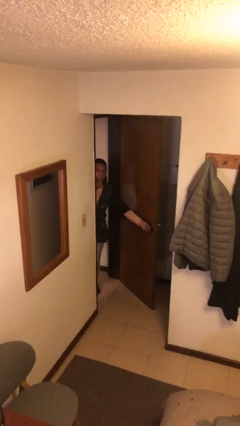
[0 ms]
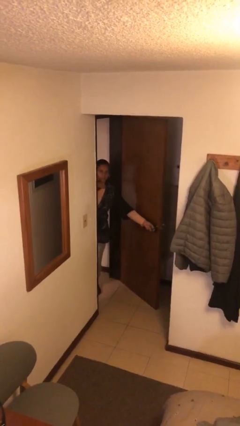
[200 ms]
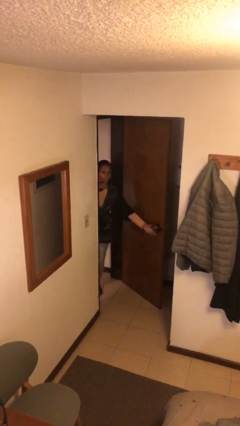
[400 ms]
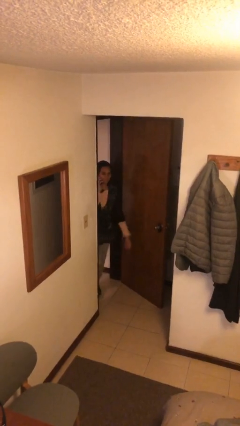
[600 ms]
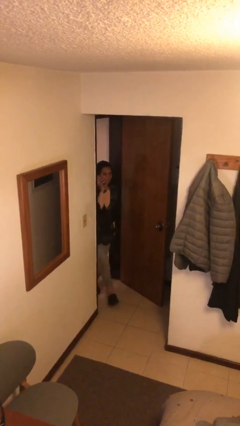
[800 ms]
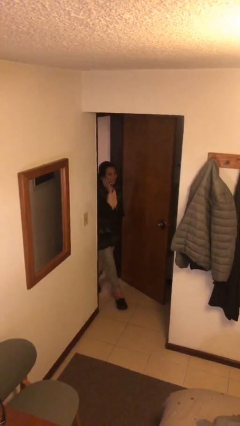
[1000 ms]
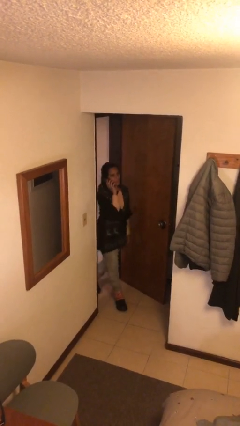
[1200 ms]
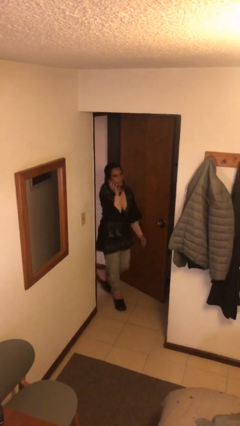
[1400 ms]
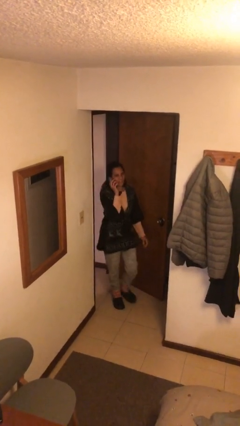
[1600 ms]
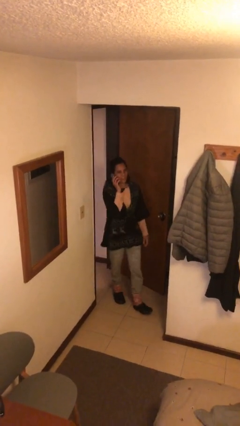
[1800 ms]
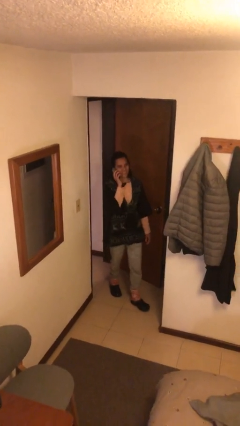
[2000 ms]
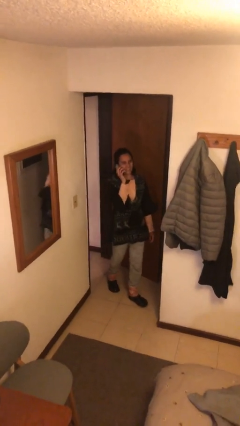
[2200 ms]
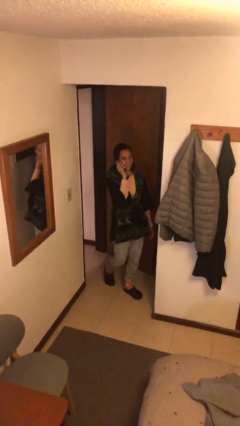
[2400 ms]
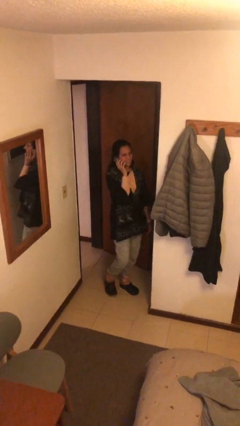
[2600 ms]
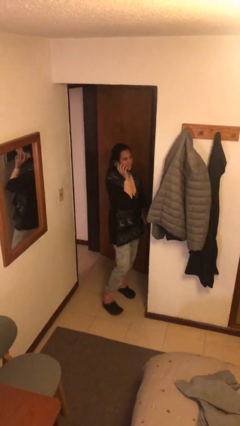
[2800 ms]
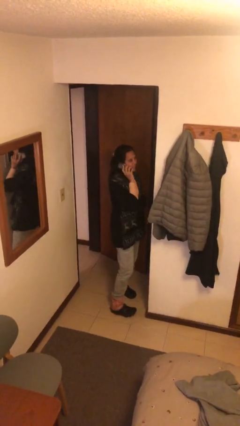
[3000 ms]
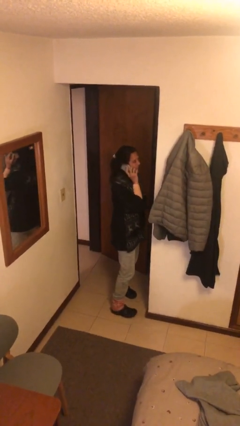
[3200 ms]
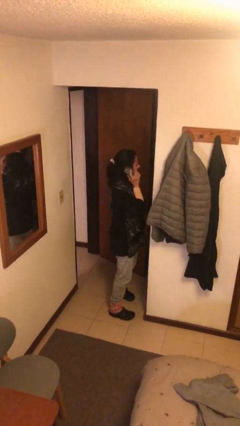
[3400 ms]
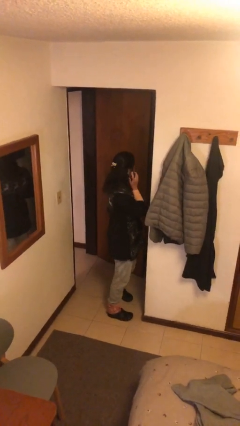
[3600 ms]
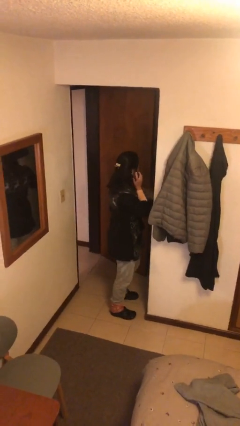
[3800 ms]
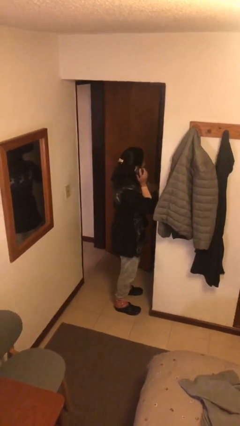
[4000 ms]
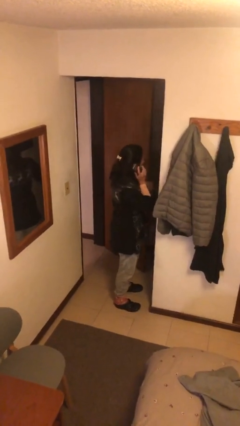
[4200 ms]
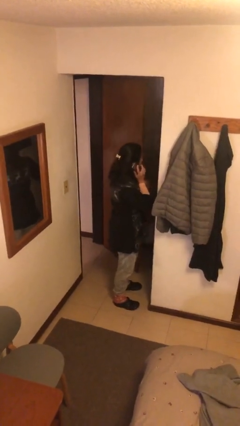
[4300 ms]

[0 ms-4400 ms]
person enters scene through structure

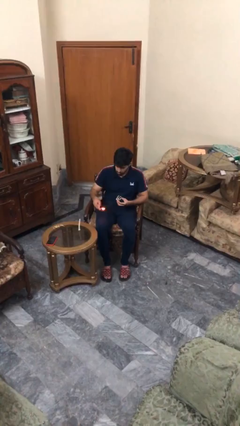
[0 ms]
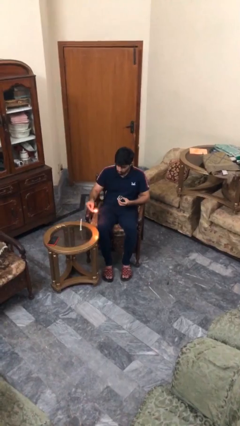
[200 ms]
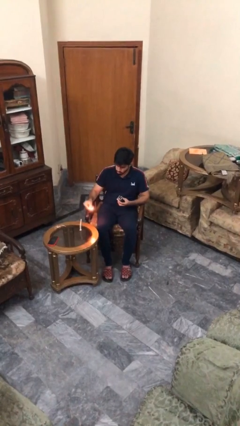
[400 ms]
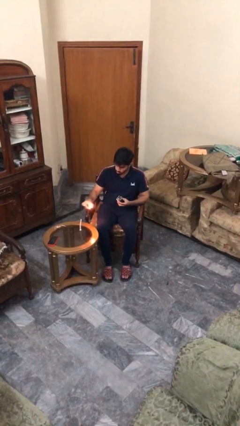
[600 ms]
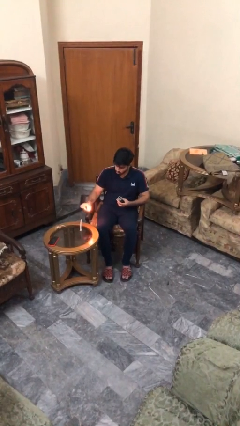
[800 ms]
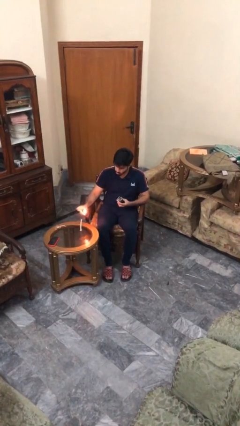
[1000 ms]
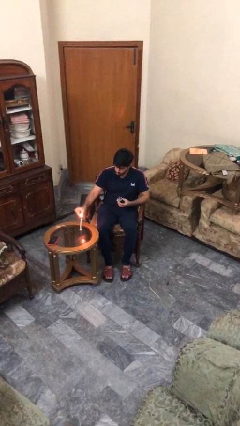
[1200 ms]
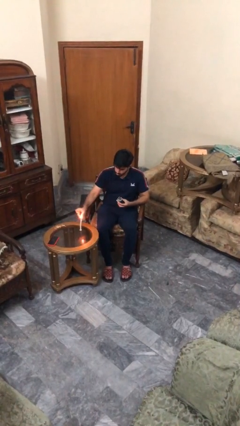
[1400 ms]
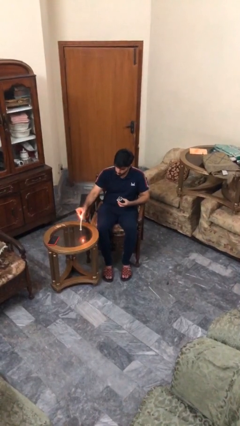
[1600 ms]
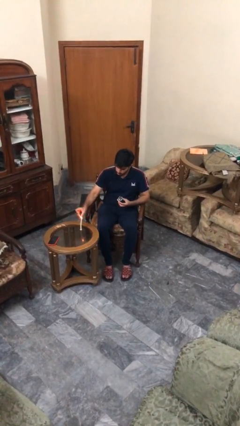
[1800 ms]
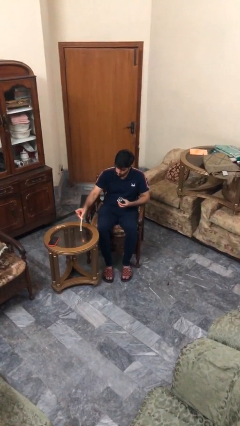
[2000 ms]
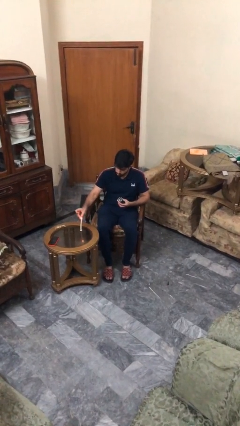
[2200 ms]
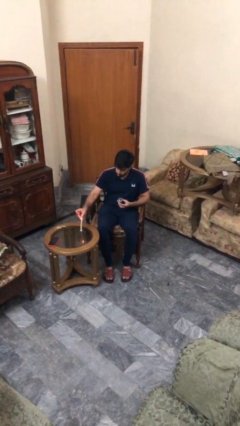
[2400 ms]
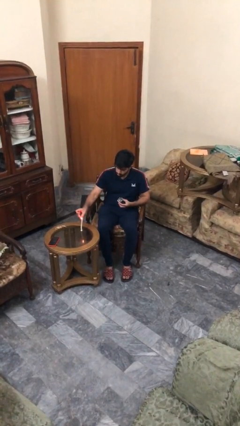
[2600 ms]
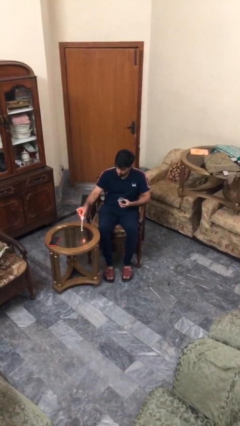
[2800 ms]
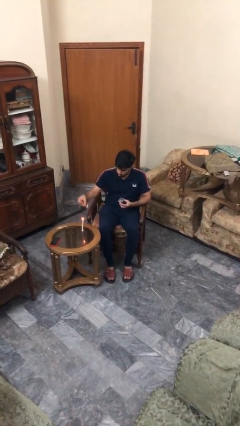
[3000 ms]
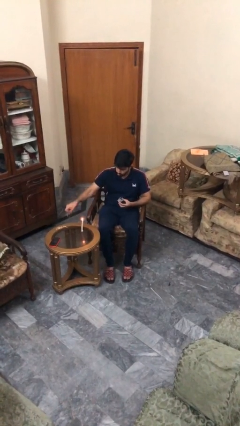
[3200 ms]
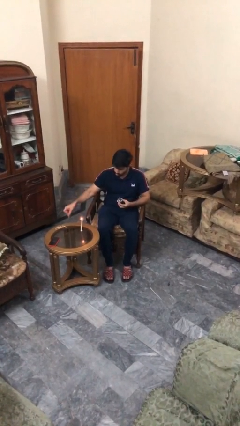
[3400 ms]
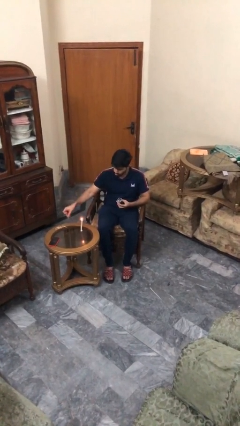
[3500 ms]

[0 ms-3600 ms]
person lights candle

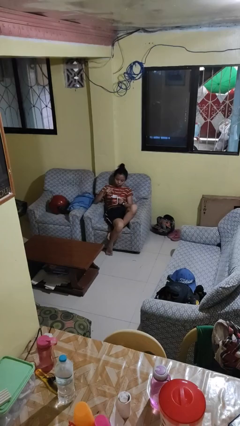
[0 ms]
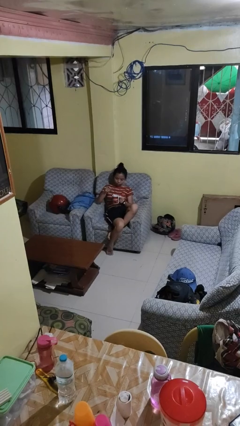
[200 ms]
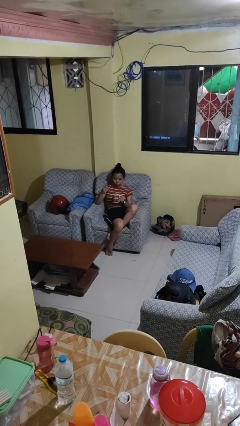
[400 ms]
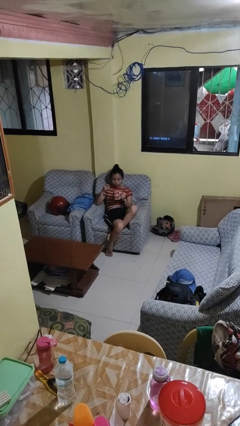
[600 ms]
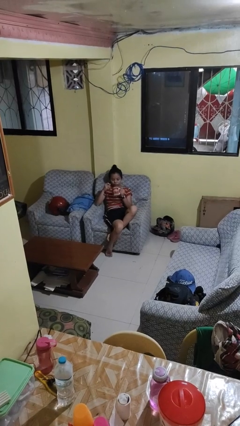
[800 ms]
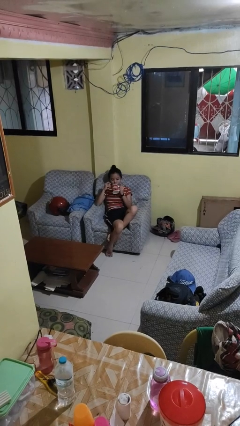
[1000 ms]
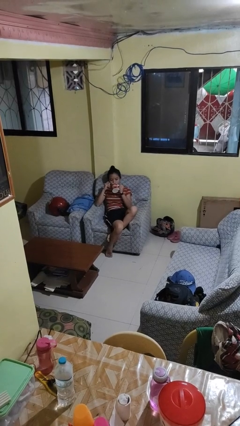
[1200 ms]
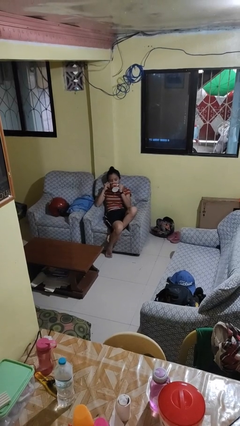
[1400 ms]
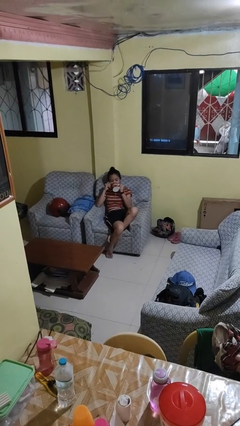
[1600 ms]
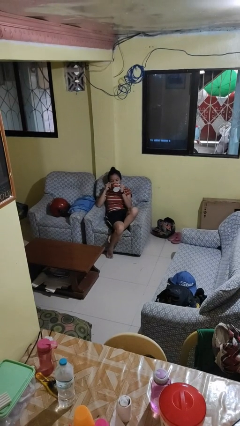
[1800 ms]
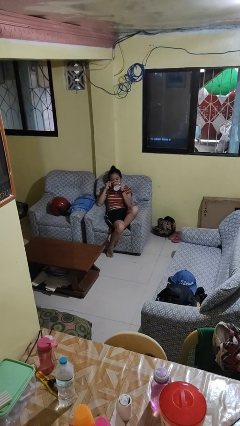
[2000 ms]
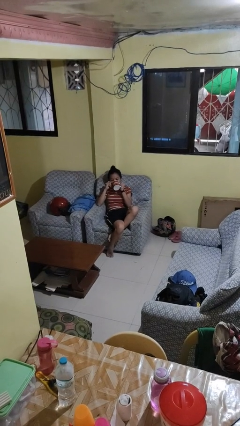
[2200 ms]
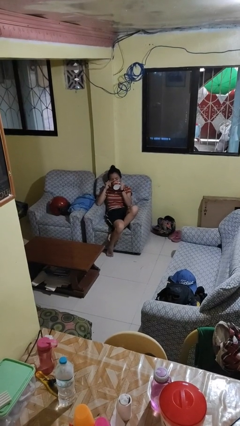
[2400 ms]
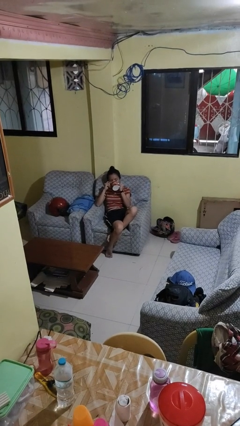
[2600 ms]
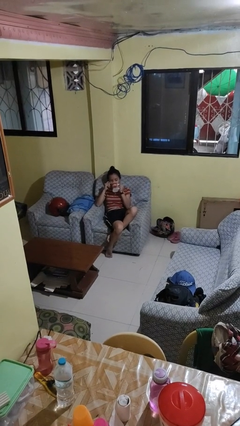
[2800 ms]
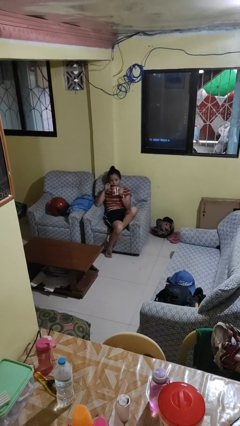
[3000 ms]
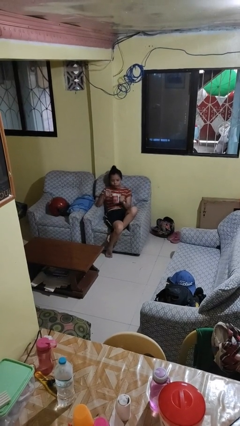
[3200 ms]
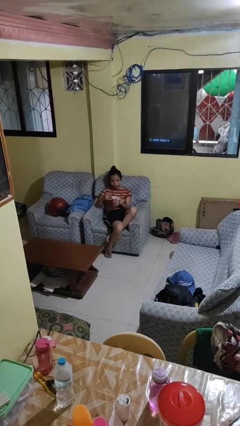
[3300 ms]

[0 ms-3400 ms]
person drinks from mug

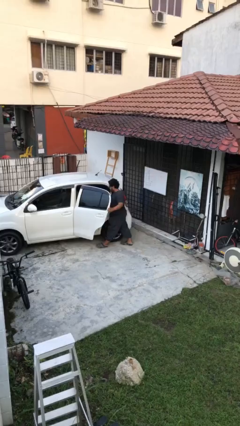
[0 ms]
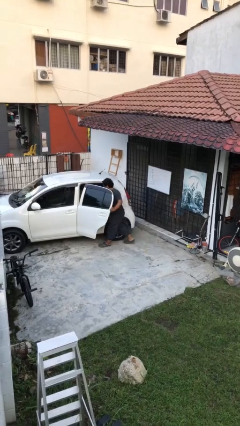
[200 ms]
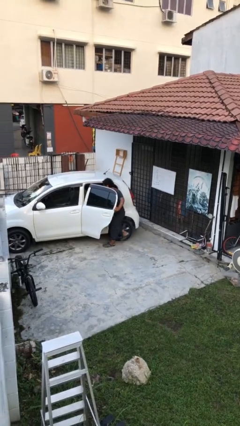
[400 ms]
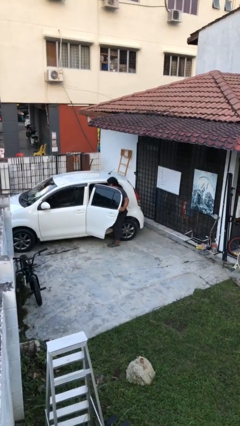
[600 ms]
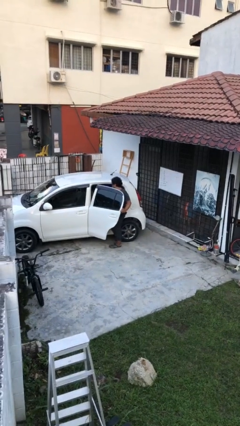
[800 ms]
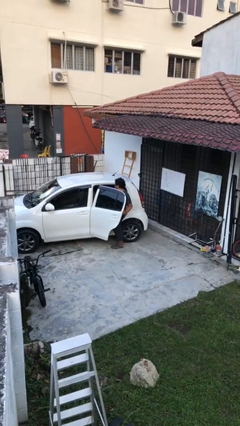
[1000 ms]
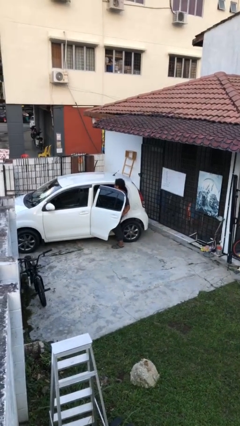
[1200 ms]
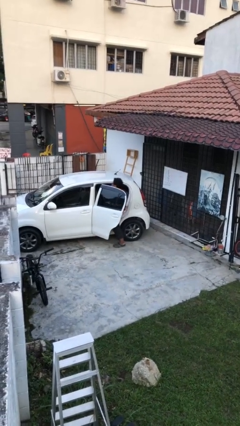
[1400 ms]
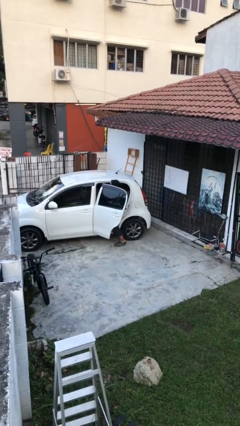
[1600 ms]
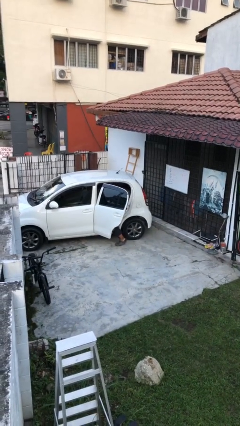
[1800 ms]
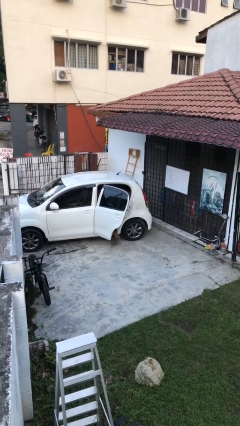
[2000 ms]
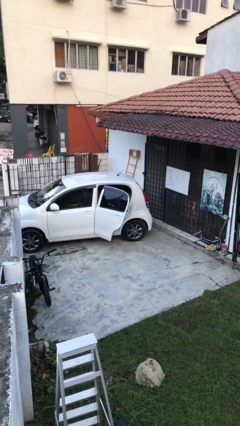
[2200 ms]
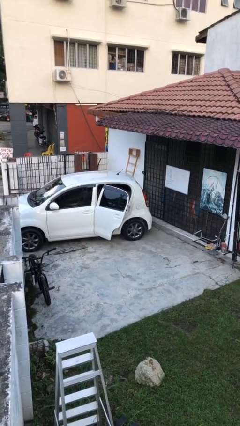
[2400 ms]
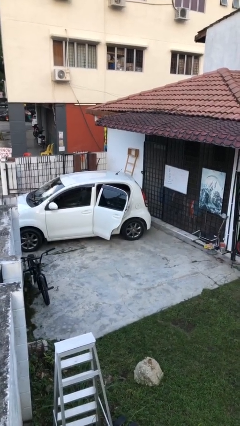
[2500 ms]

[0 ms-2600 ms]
person enters car

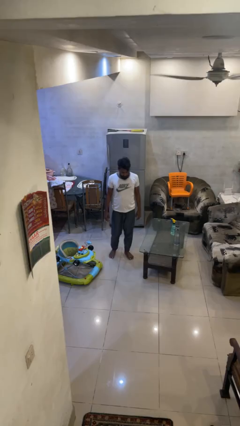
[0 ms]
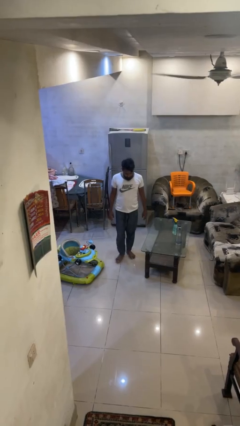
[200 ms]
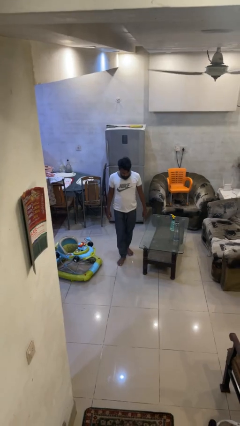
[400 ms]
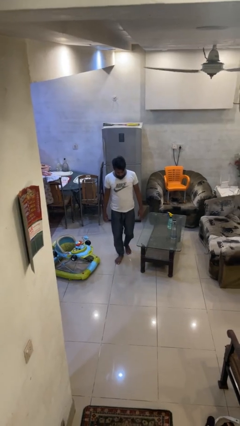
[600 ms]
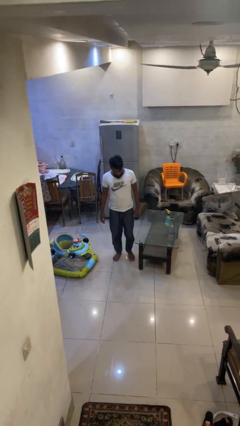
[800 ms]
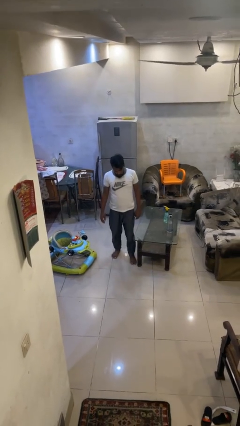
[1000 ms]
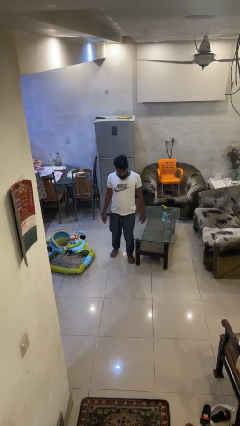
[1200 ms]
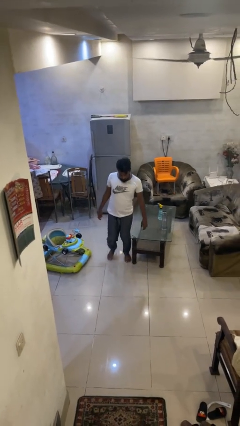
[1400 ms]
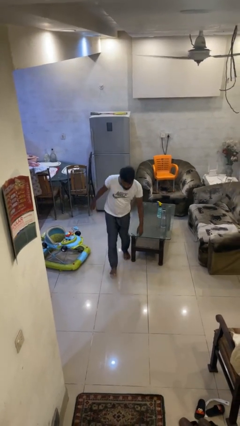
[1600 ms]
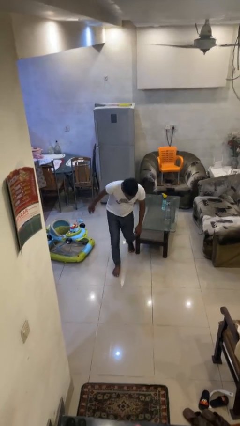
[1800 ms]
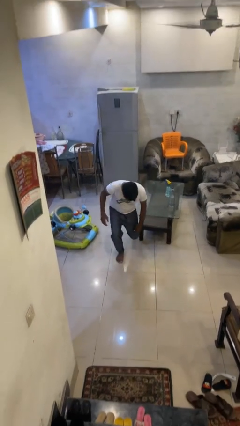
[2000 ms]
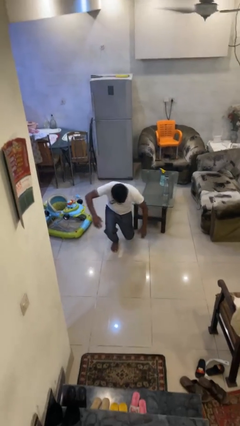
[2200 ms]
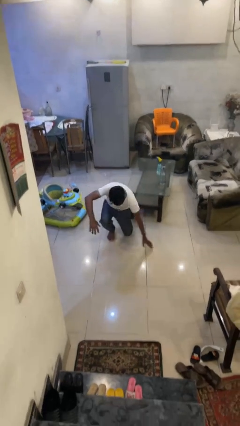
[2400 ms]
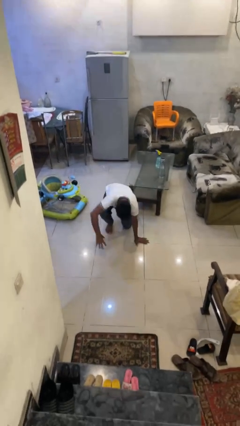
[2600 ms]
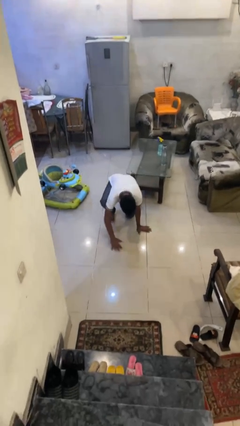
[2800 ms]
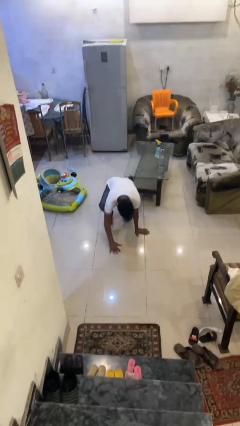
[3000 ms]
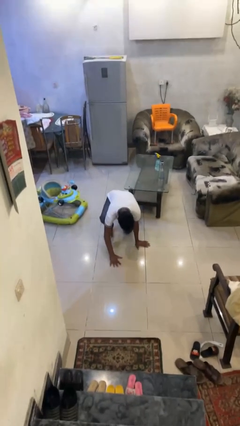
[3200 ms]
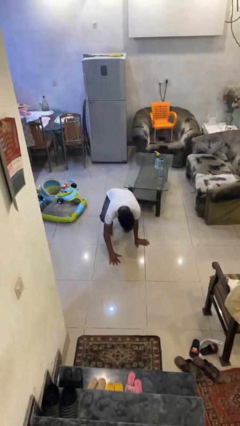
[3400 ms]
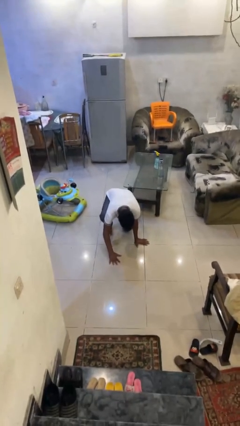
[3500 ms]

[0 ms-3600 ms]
person trips on object on floor
